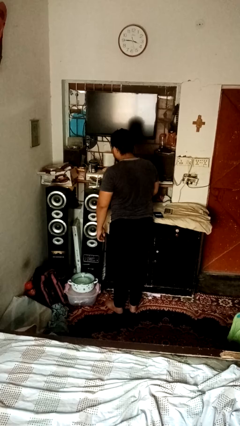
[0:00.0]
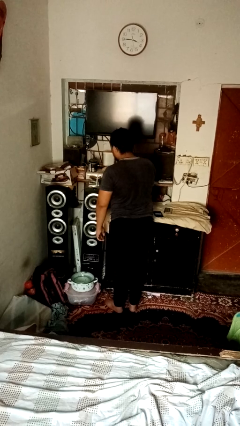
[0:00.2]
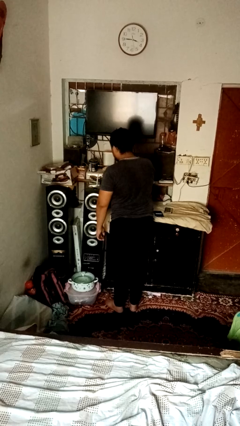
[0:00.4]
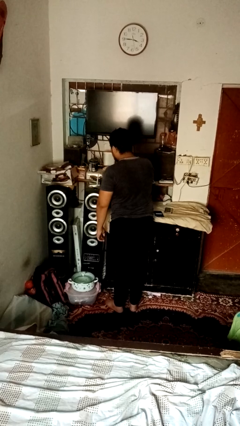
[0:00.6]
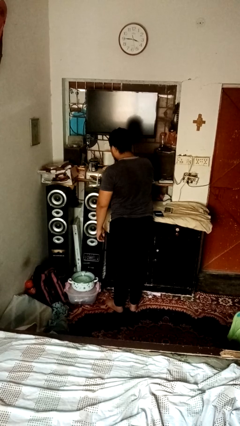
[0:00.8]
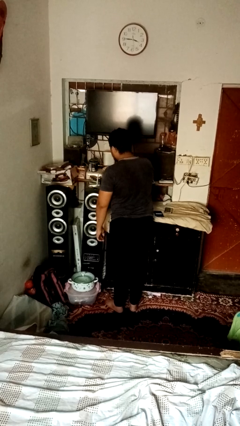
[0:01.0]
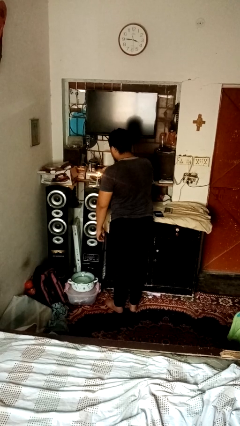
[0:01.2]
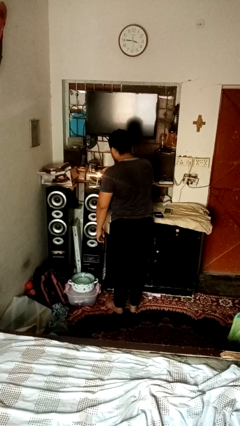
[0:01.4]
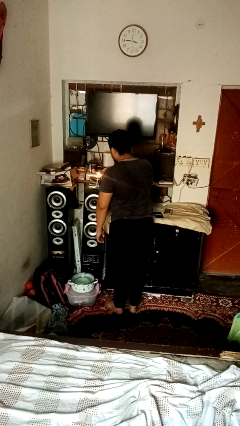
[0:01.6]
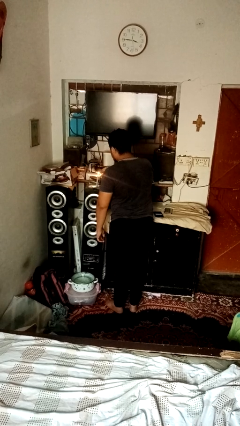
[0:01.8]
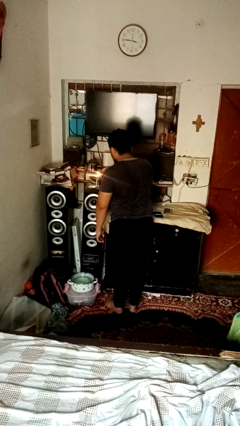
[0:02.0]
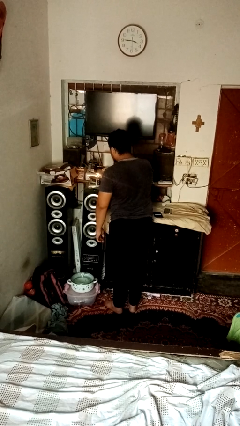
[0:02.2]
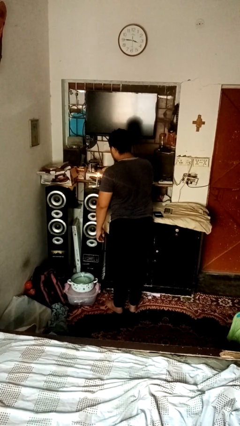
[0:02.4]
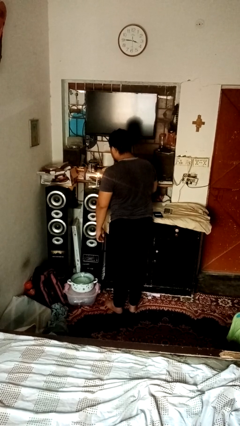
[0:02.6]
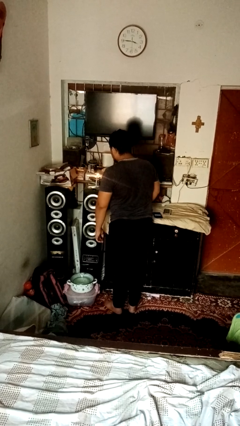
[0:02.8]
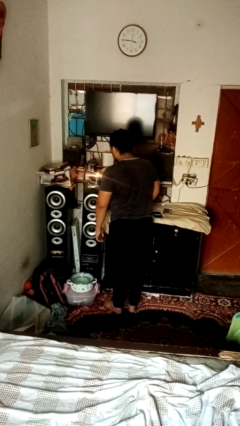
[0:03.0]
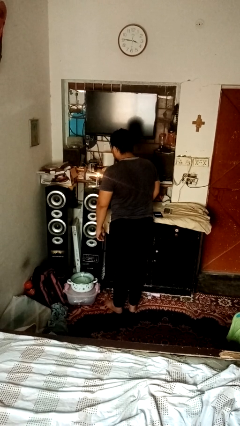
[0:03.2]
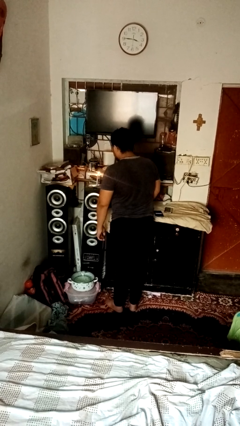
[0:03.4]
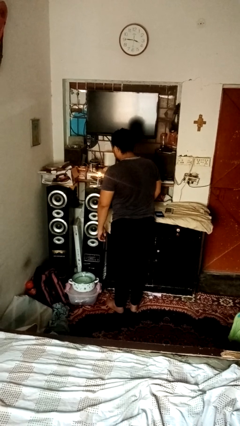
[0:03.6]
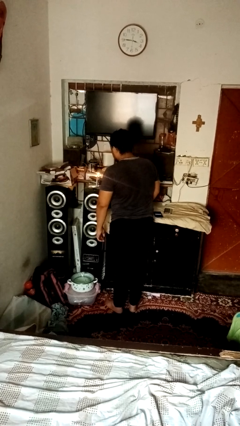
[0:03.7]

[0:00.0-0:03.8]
person lights candle

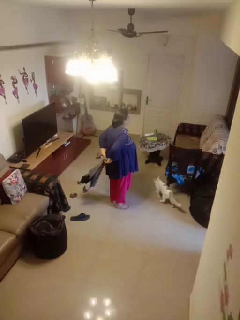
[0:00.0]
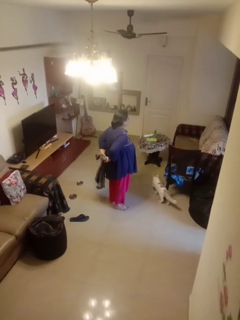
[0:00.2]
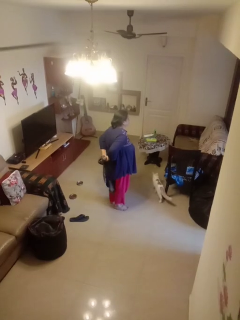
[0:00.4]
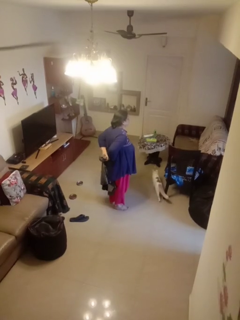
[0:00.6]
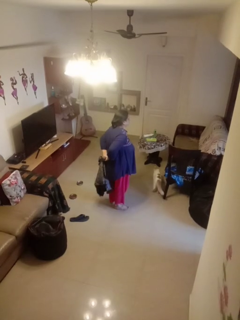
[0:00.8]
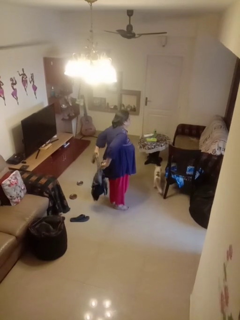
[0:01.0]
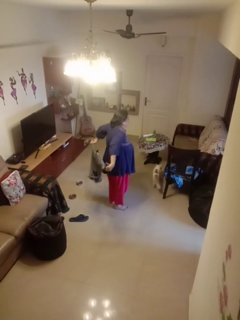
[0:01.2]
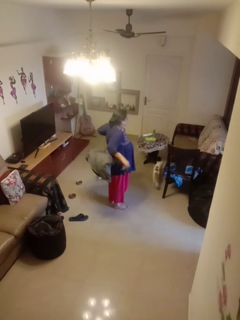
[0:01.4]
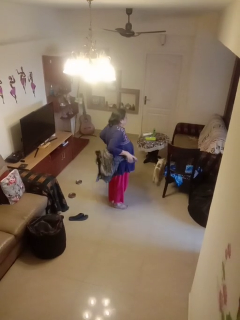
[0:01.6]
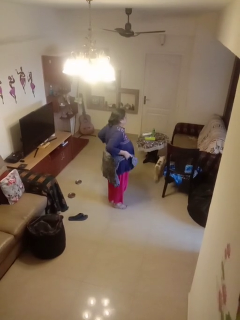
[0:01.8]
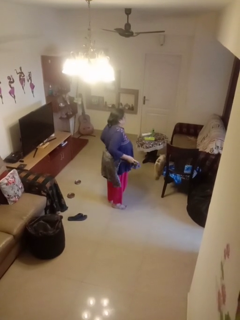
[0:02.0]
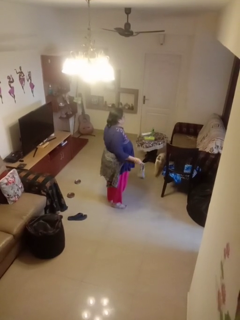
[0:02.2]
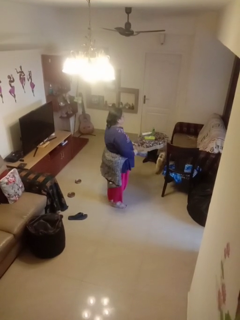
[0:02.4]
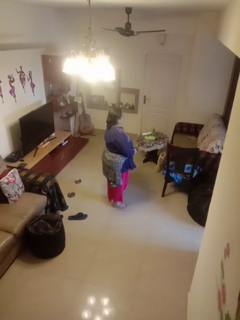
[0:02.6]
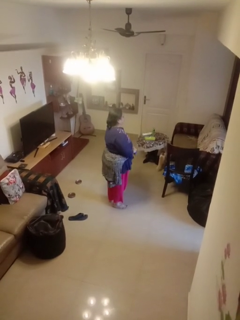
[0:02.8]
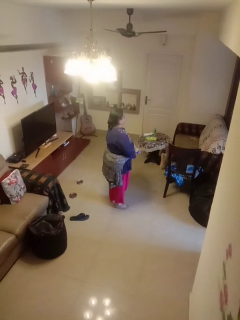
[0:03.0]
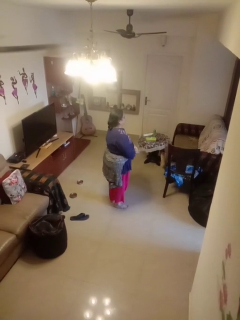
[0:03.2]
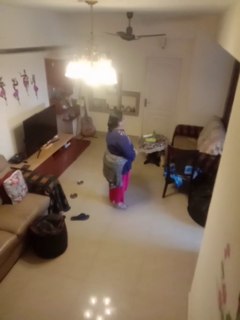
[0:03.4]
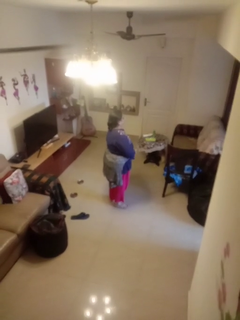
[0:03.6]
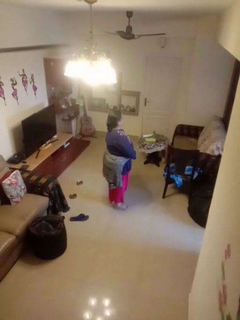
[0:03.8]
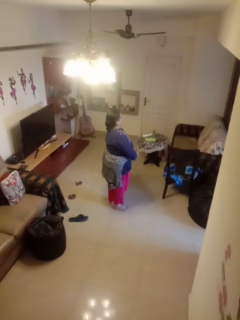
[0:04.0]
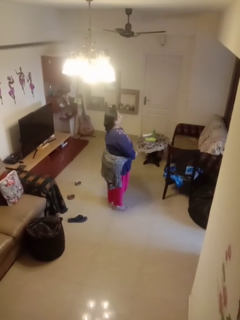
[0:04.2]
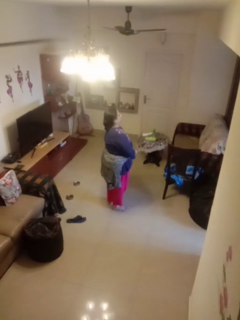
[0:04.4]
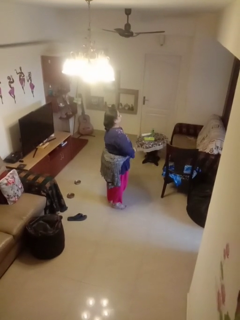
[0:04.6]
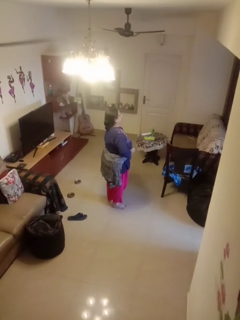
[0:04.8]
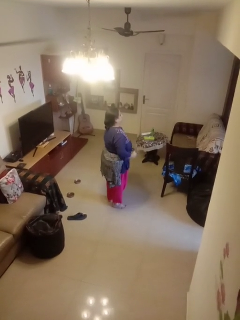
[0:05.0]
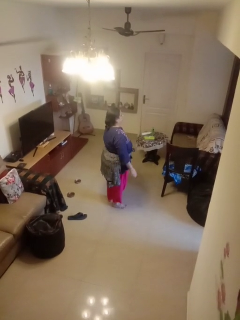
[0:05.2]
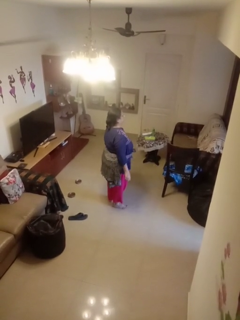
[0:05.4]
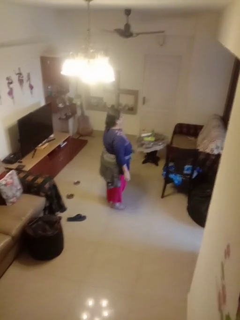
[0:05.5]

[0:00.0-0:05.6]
person ties jacket around waist

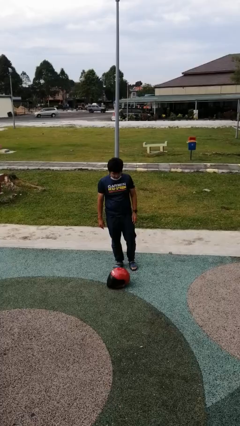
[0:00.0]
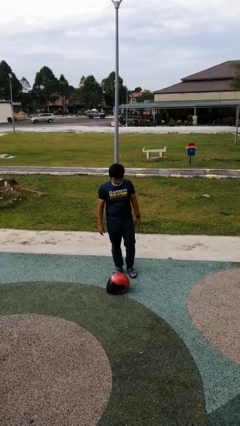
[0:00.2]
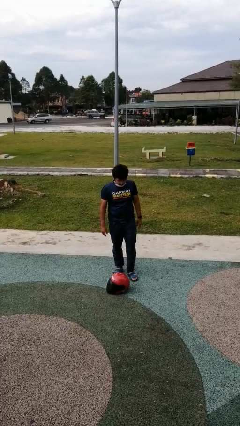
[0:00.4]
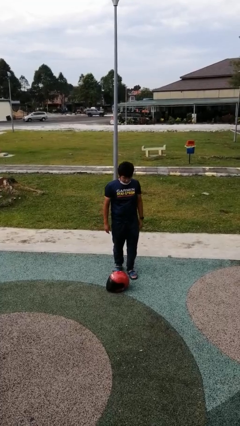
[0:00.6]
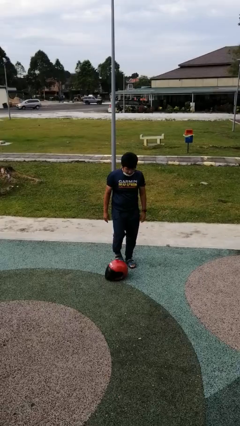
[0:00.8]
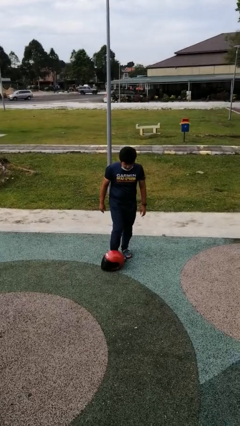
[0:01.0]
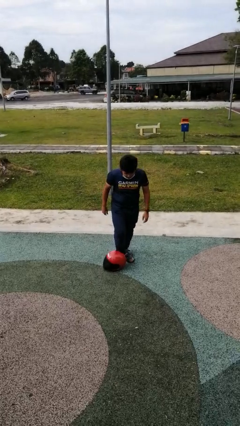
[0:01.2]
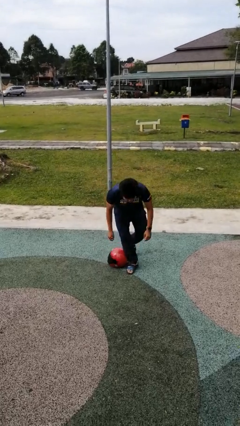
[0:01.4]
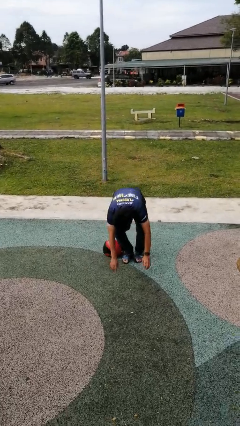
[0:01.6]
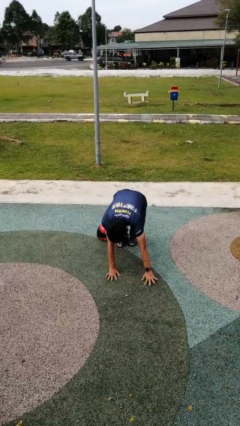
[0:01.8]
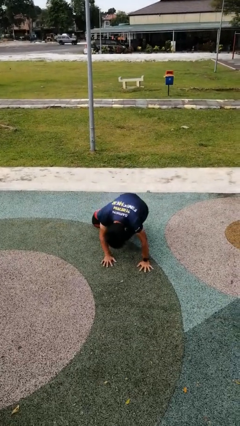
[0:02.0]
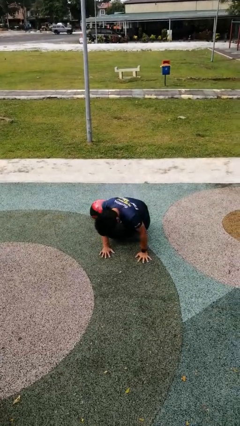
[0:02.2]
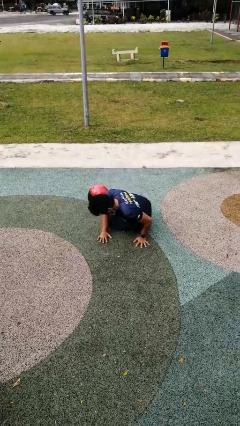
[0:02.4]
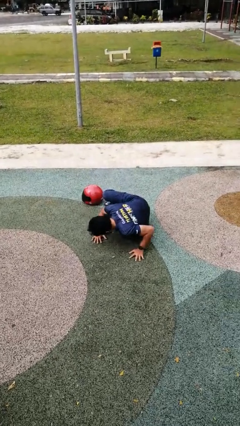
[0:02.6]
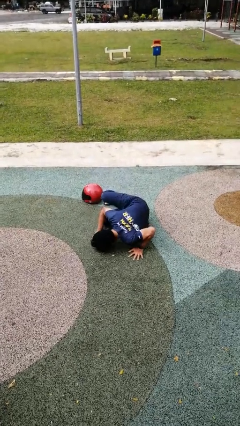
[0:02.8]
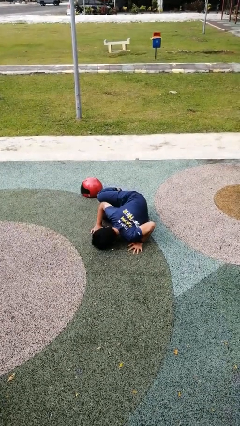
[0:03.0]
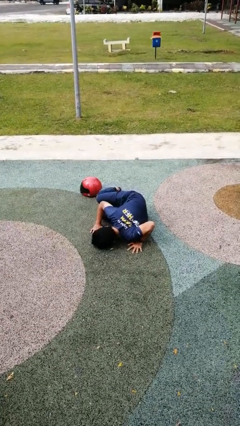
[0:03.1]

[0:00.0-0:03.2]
person trips on object on floor

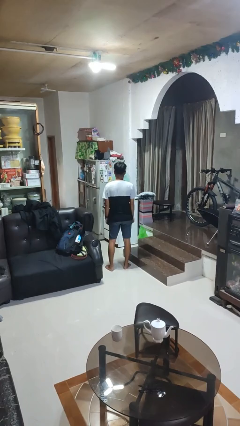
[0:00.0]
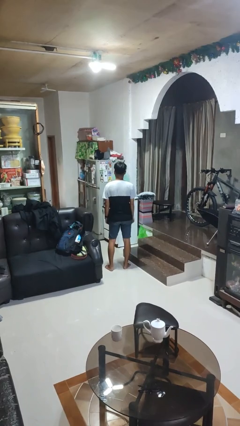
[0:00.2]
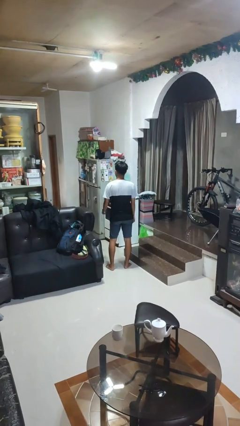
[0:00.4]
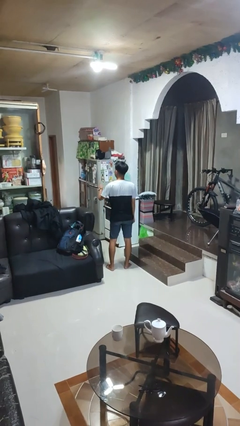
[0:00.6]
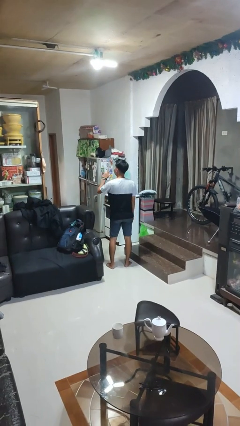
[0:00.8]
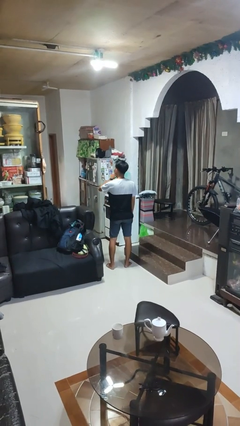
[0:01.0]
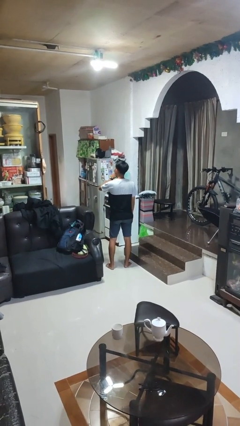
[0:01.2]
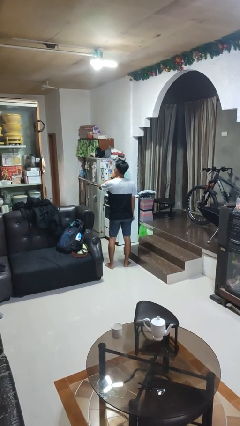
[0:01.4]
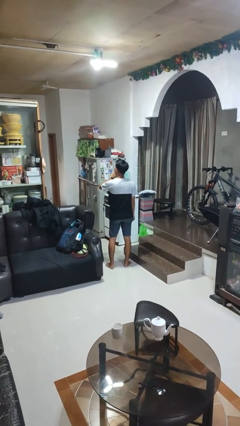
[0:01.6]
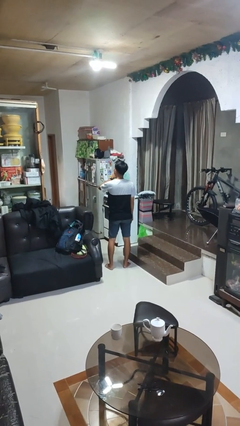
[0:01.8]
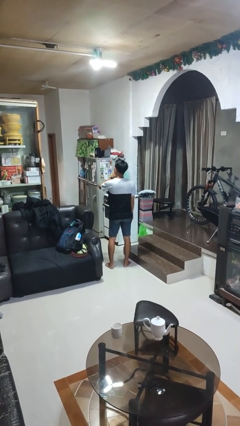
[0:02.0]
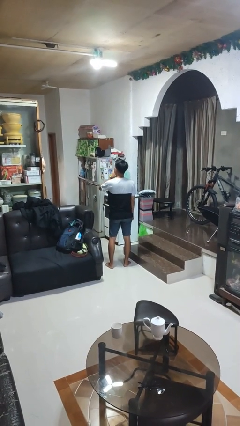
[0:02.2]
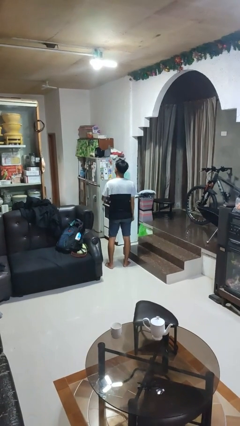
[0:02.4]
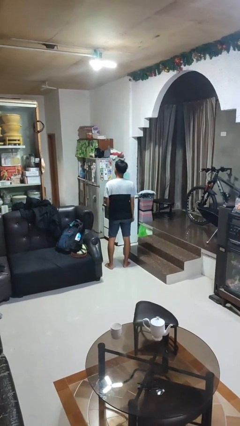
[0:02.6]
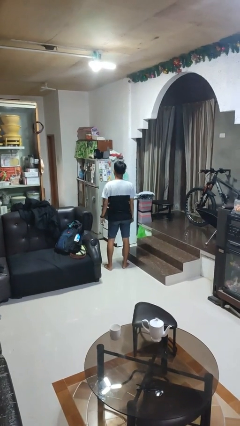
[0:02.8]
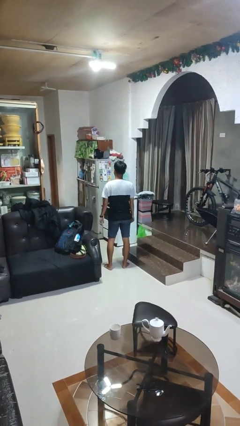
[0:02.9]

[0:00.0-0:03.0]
person gestures be quiet

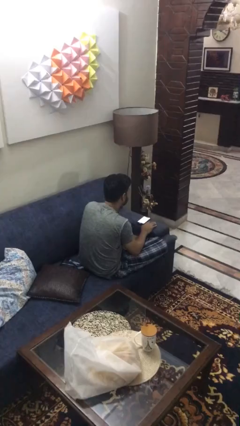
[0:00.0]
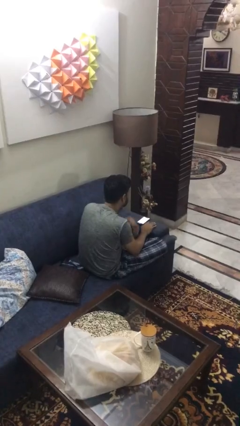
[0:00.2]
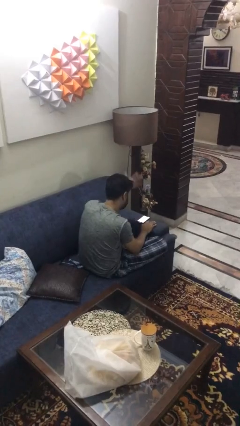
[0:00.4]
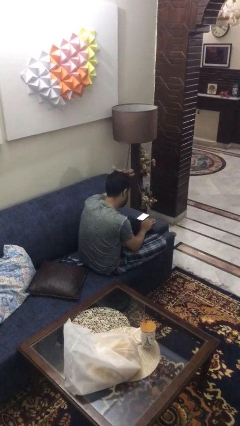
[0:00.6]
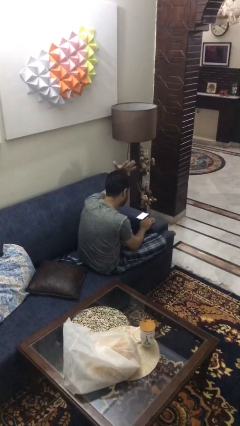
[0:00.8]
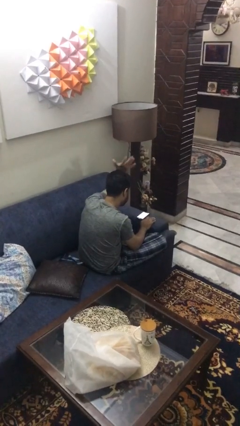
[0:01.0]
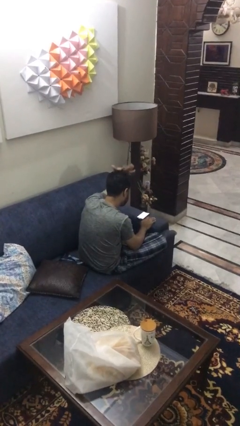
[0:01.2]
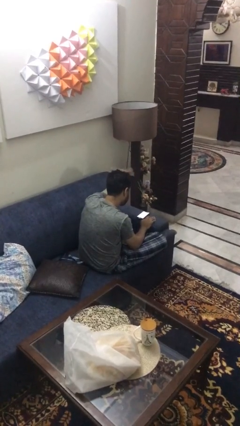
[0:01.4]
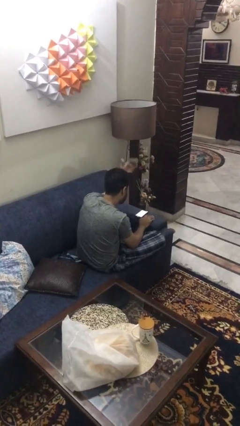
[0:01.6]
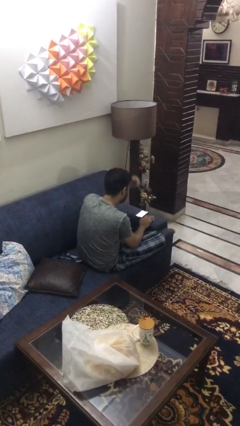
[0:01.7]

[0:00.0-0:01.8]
person pats head

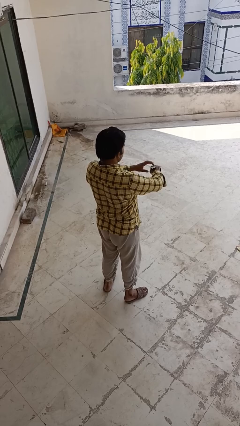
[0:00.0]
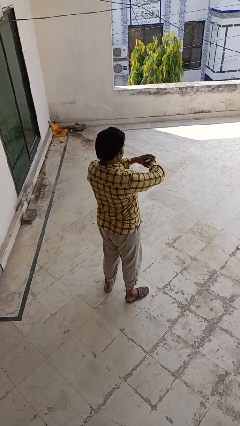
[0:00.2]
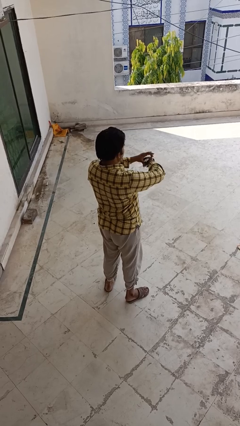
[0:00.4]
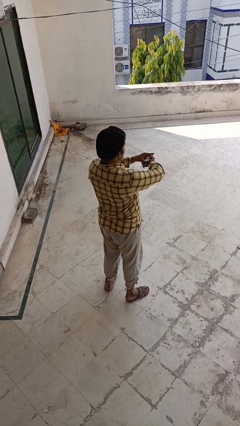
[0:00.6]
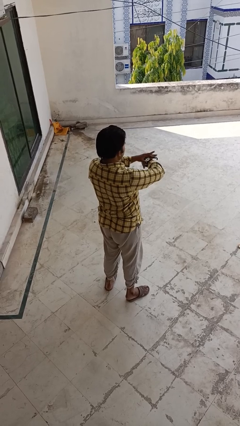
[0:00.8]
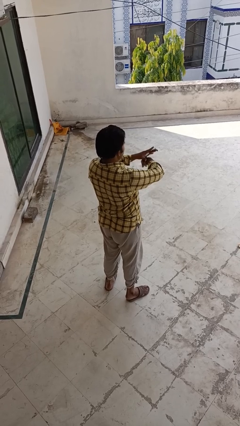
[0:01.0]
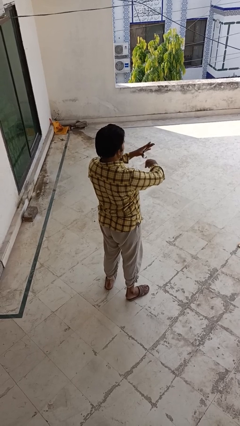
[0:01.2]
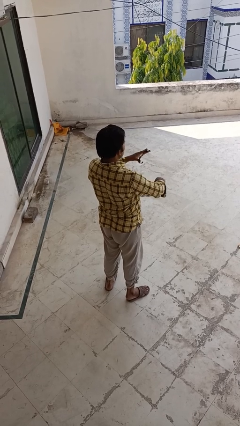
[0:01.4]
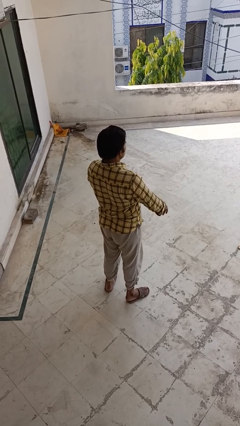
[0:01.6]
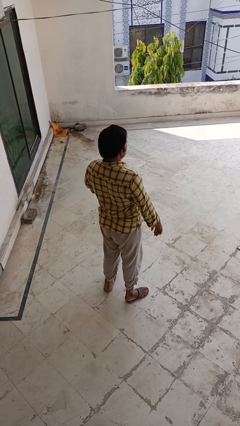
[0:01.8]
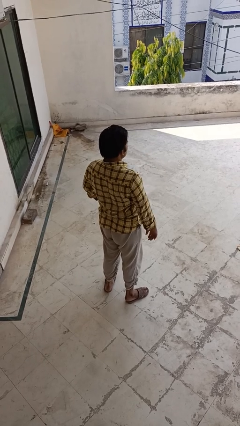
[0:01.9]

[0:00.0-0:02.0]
person takes off wristwatch
